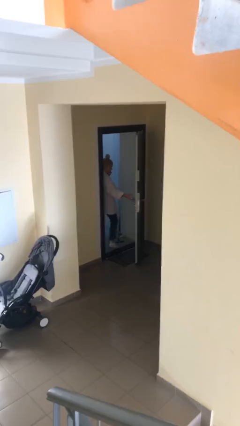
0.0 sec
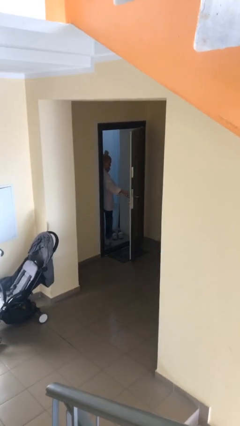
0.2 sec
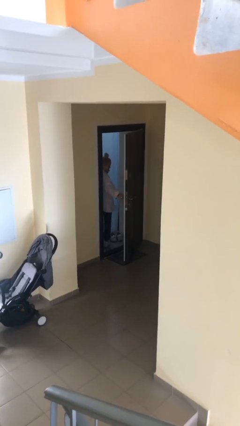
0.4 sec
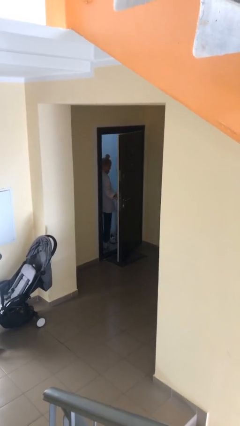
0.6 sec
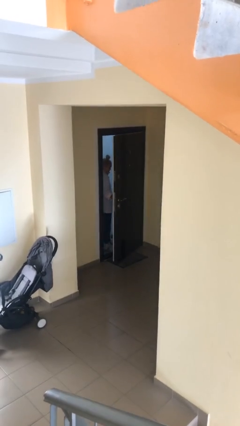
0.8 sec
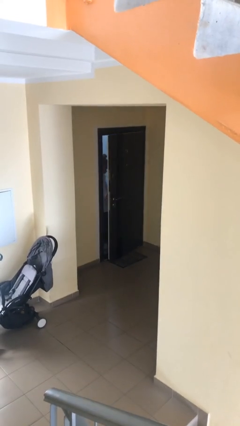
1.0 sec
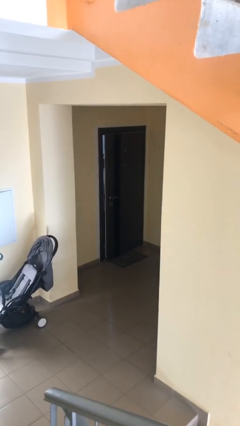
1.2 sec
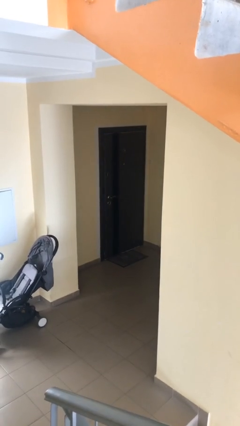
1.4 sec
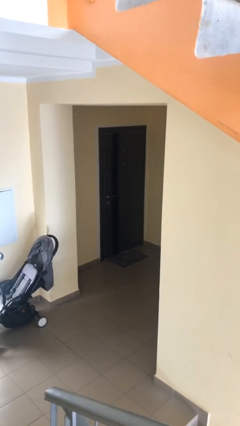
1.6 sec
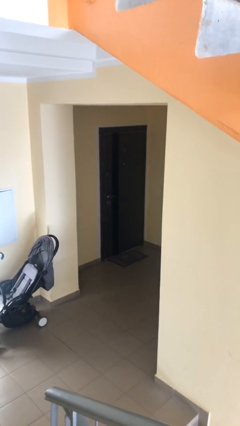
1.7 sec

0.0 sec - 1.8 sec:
person closes facility door

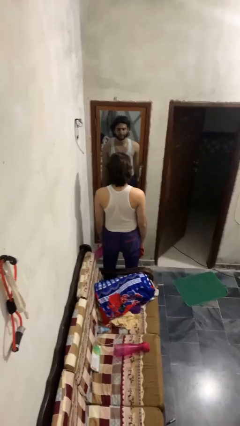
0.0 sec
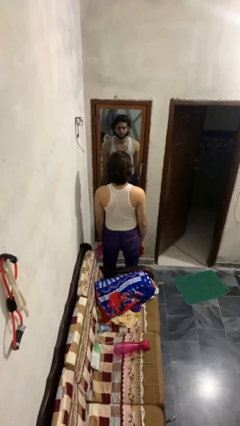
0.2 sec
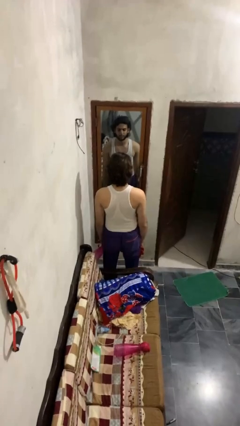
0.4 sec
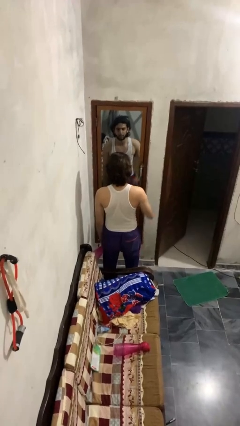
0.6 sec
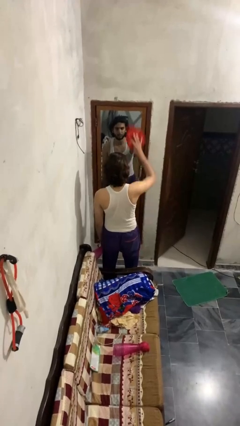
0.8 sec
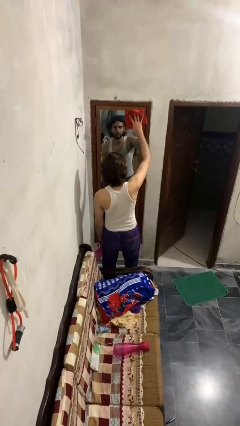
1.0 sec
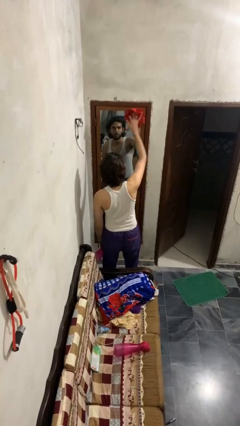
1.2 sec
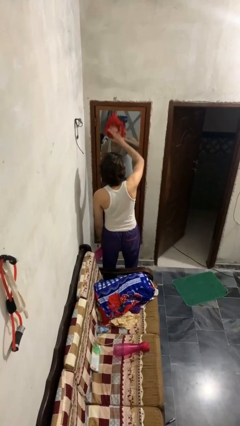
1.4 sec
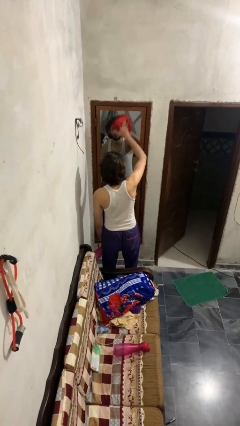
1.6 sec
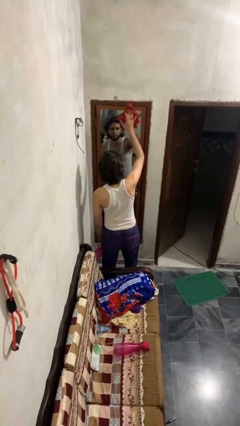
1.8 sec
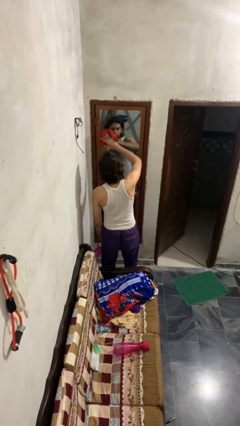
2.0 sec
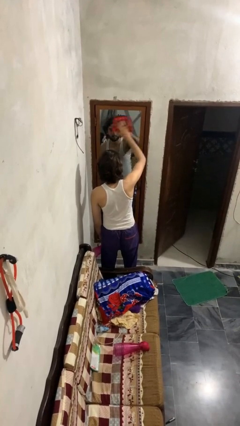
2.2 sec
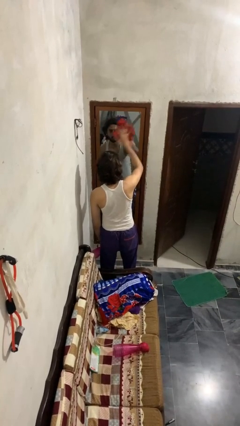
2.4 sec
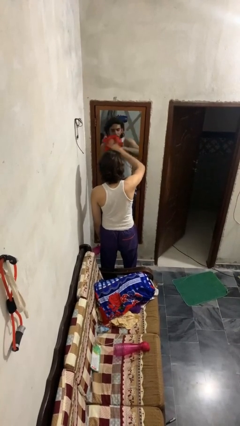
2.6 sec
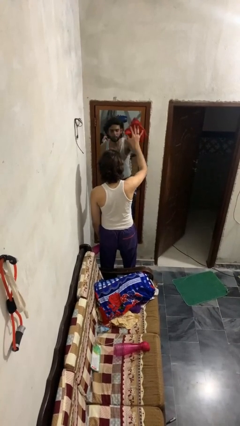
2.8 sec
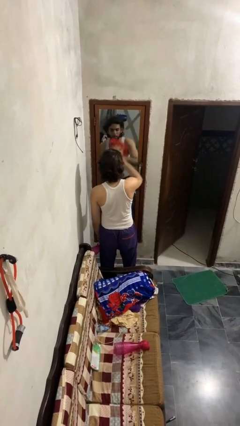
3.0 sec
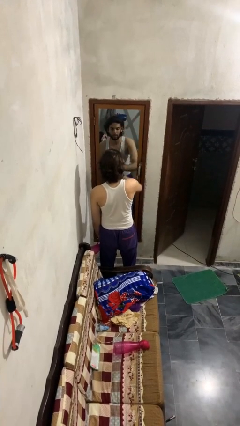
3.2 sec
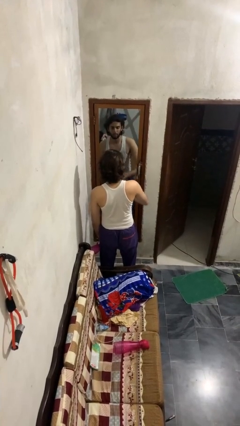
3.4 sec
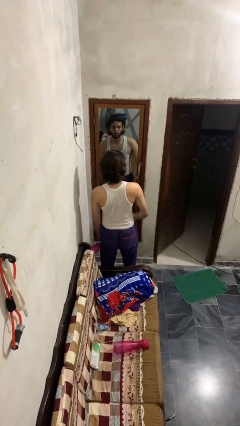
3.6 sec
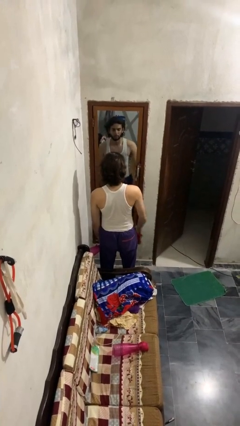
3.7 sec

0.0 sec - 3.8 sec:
person washes window

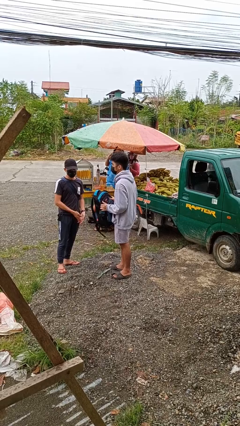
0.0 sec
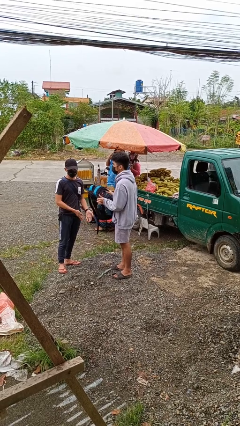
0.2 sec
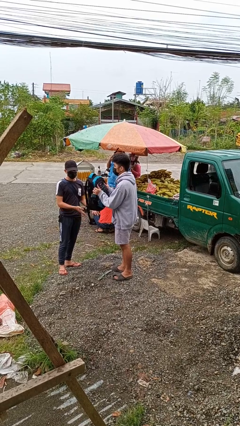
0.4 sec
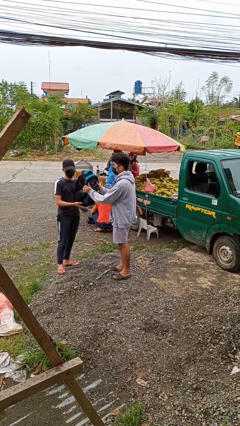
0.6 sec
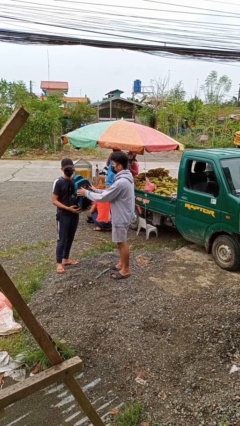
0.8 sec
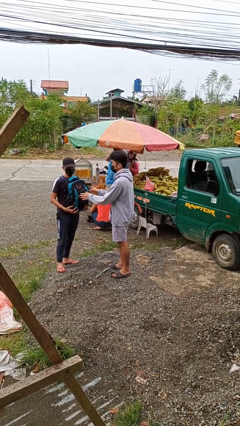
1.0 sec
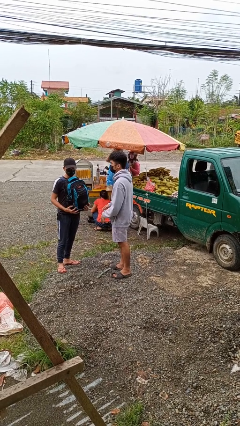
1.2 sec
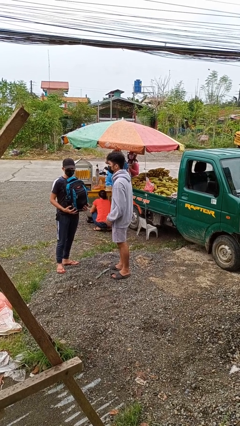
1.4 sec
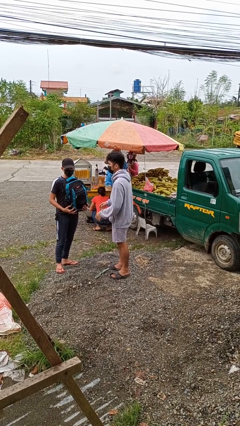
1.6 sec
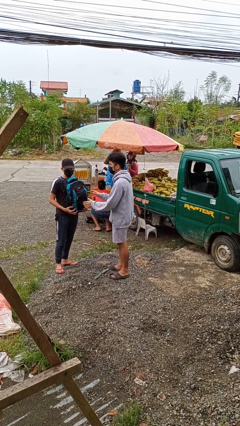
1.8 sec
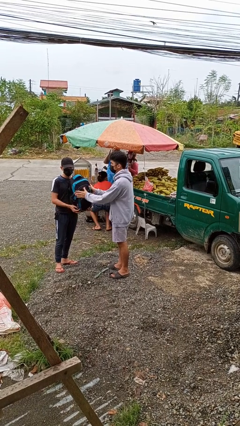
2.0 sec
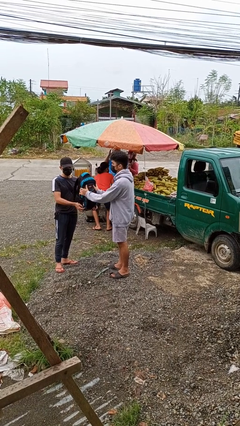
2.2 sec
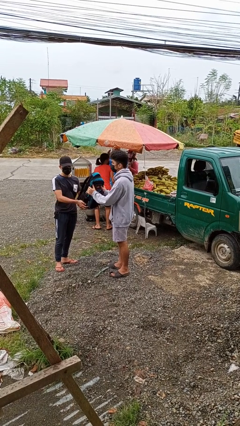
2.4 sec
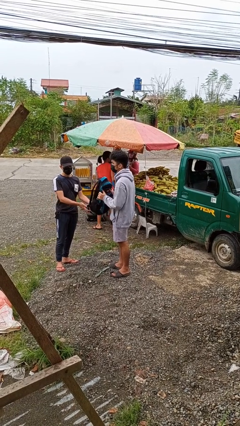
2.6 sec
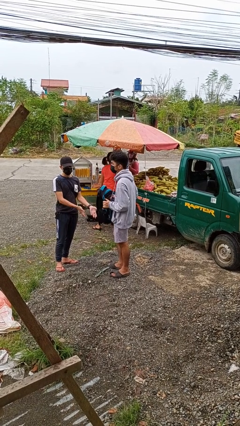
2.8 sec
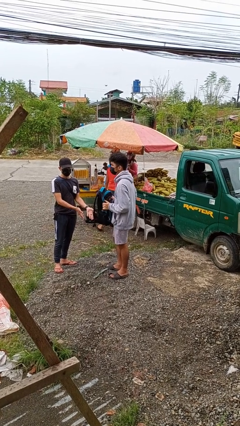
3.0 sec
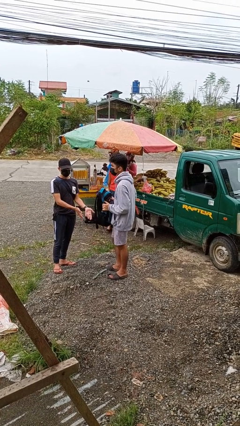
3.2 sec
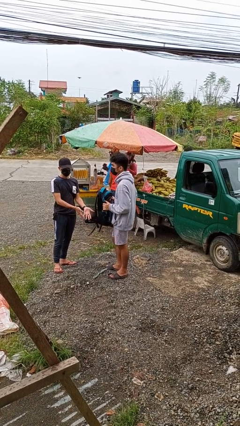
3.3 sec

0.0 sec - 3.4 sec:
person transfers object to person

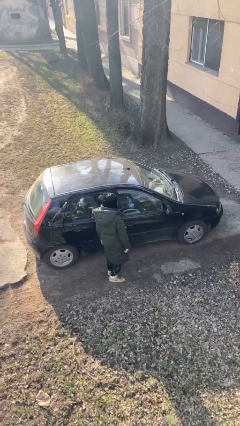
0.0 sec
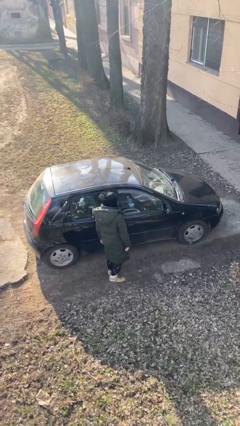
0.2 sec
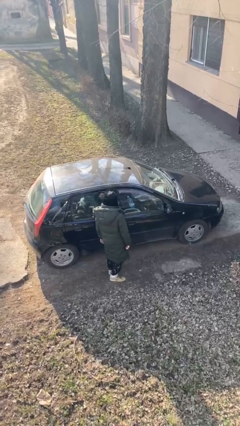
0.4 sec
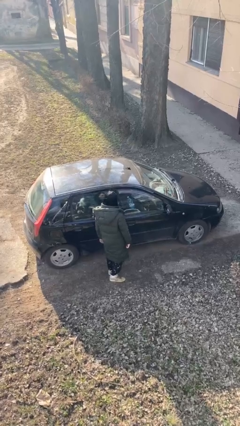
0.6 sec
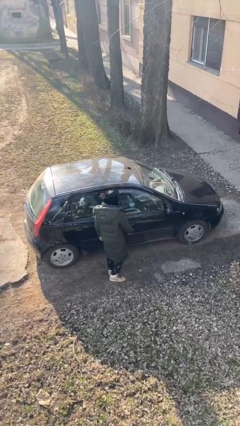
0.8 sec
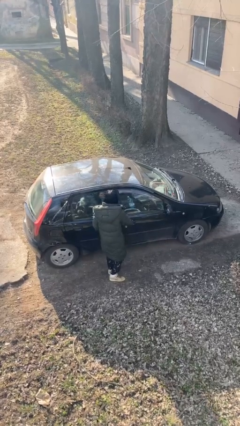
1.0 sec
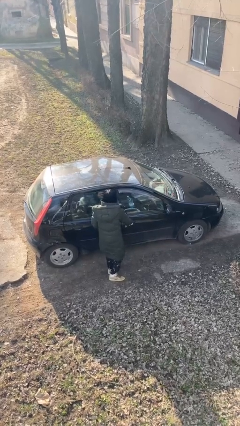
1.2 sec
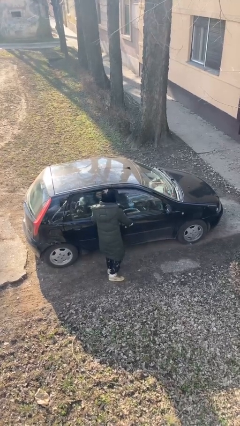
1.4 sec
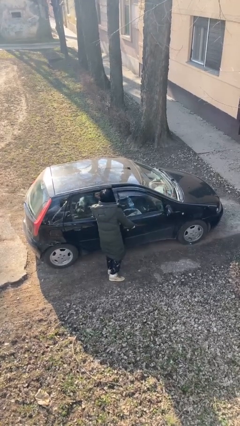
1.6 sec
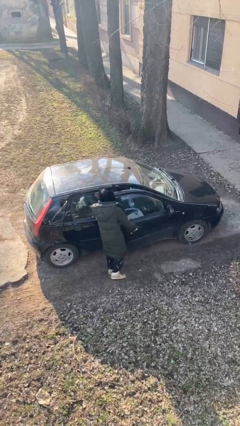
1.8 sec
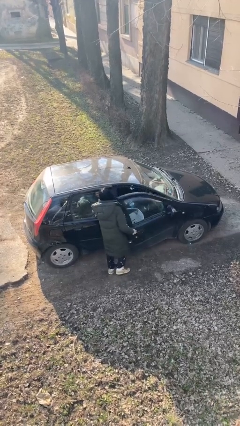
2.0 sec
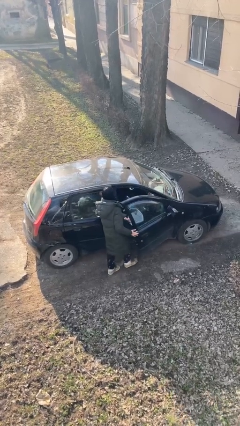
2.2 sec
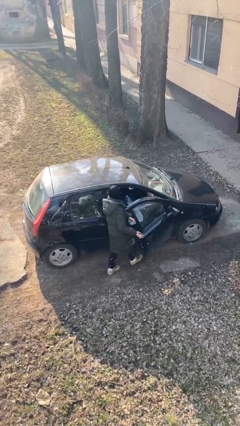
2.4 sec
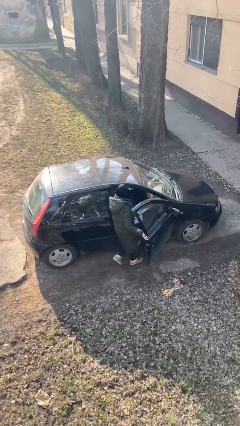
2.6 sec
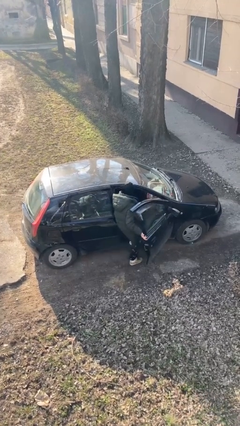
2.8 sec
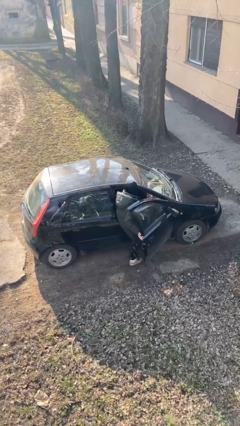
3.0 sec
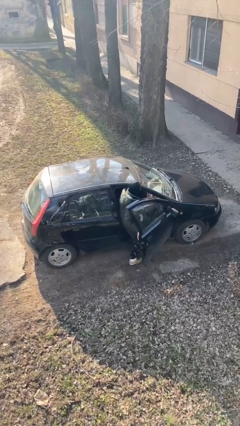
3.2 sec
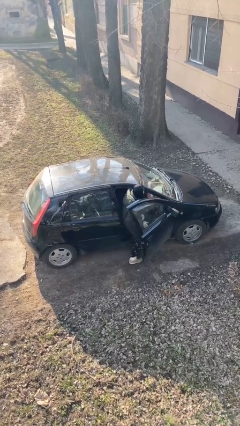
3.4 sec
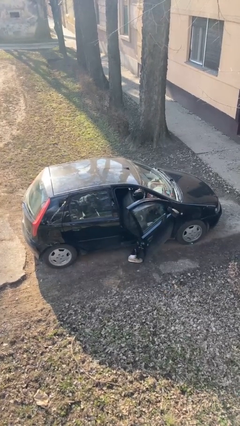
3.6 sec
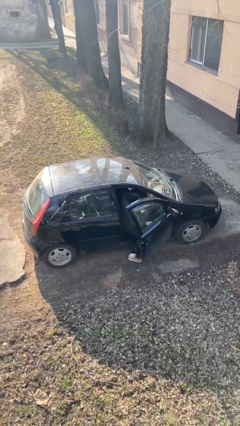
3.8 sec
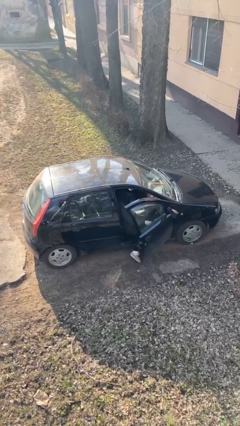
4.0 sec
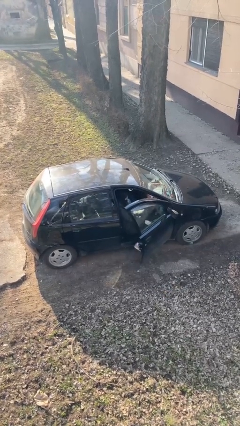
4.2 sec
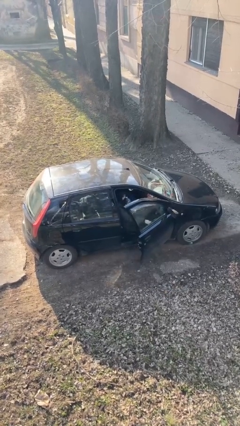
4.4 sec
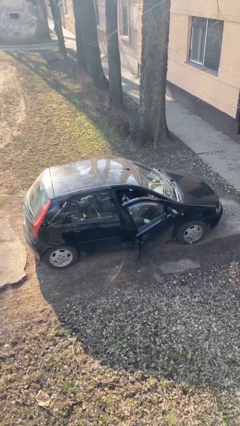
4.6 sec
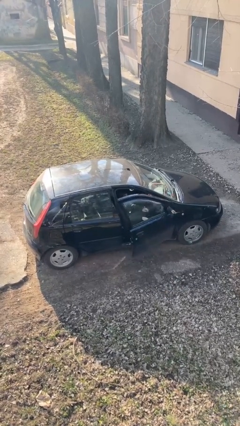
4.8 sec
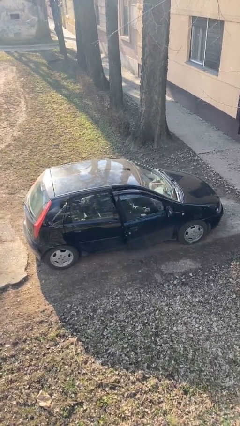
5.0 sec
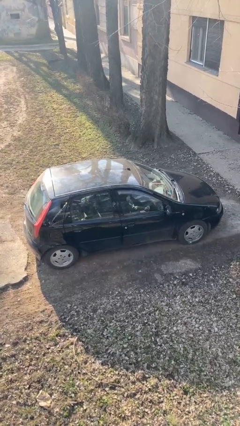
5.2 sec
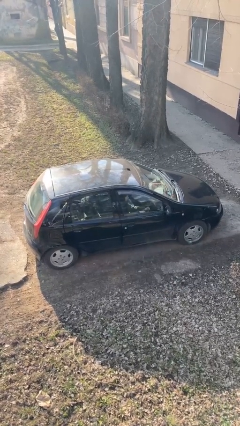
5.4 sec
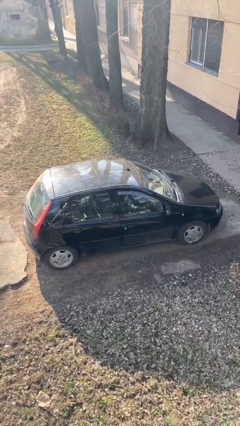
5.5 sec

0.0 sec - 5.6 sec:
car picks up person

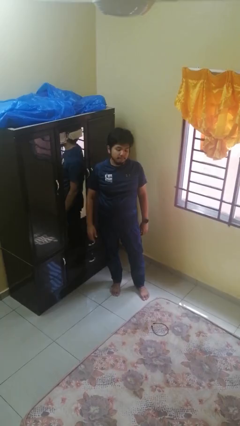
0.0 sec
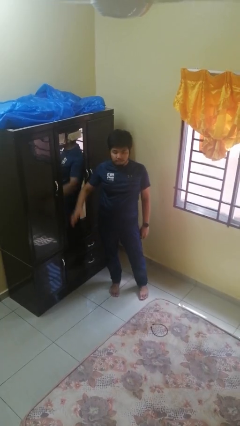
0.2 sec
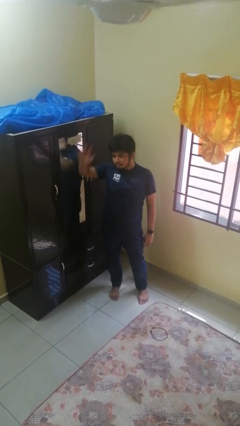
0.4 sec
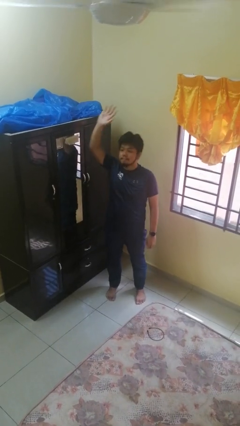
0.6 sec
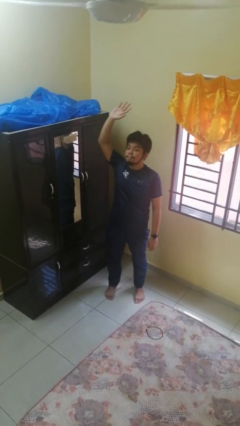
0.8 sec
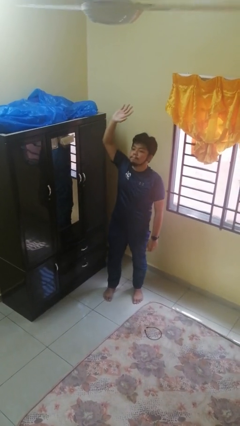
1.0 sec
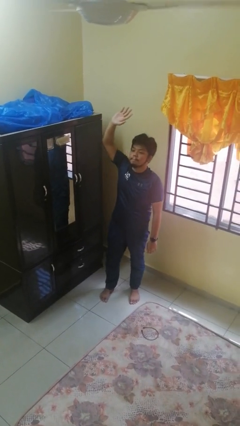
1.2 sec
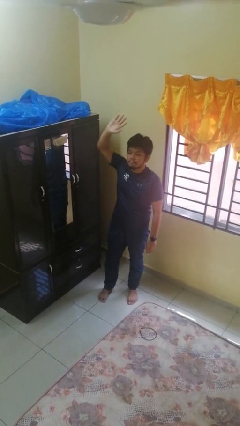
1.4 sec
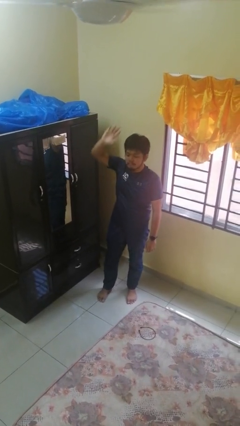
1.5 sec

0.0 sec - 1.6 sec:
person gestures raise hand

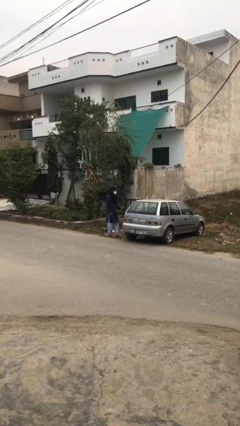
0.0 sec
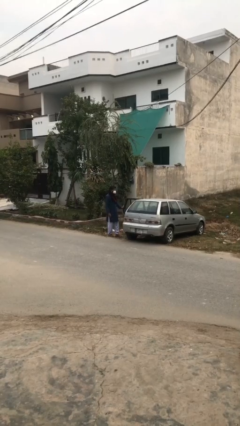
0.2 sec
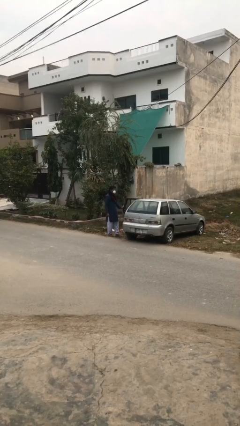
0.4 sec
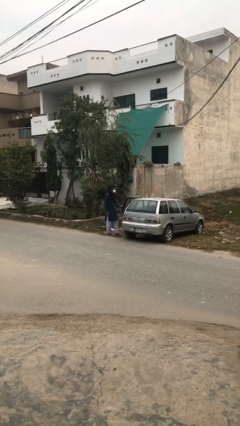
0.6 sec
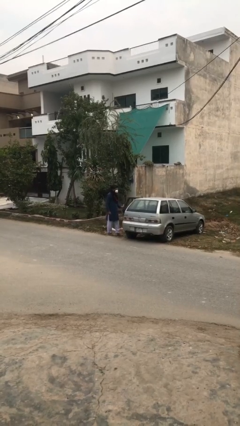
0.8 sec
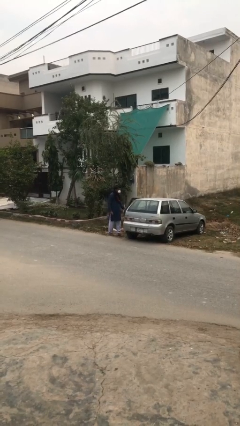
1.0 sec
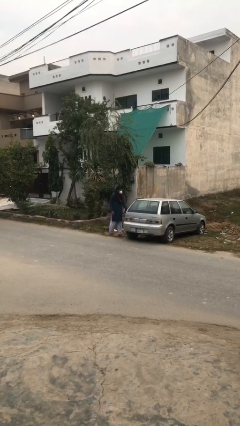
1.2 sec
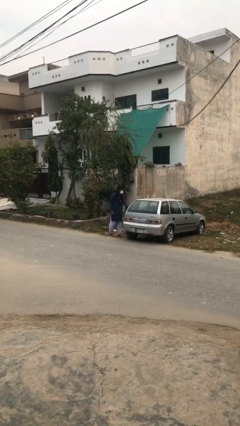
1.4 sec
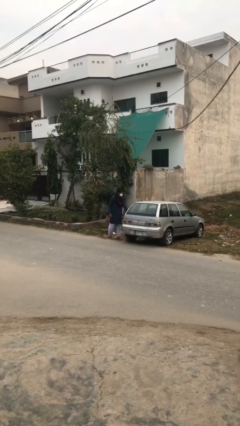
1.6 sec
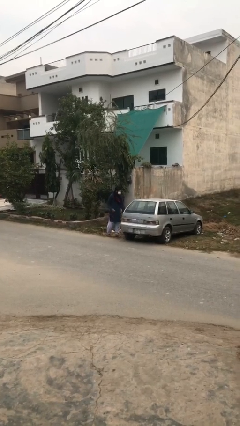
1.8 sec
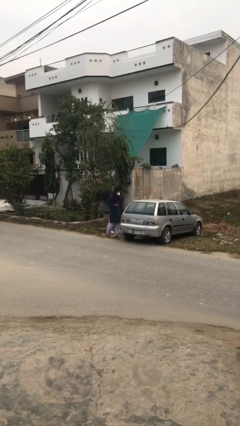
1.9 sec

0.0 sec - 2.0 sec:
person closes car door
